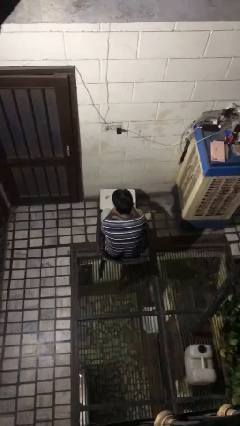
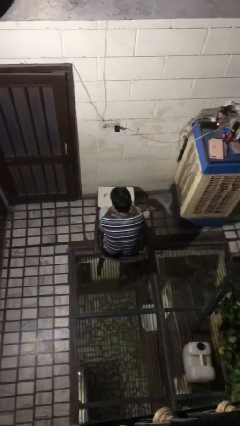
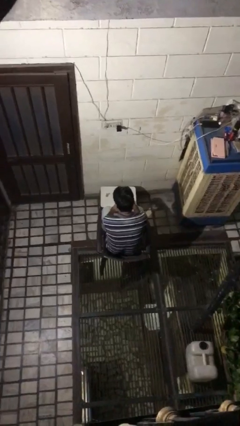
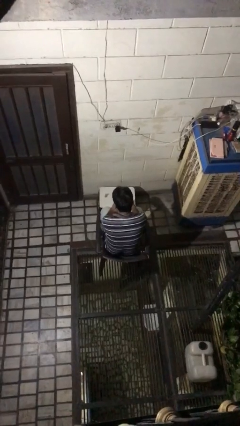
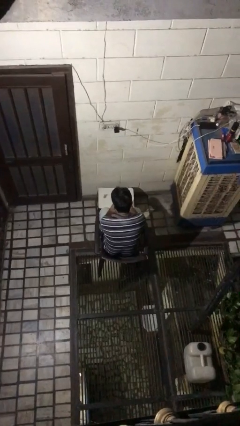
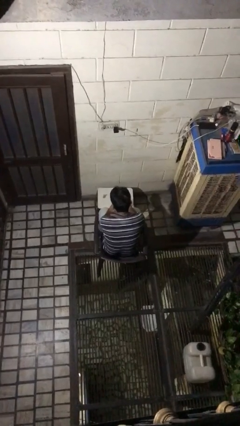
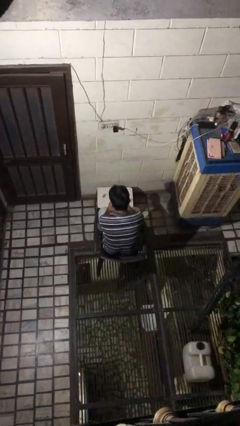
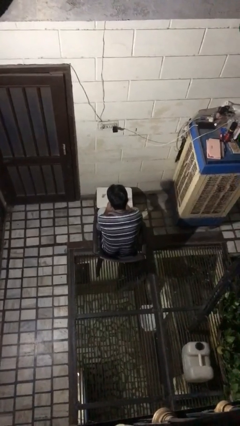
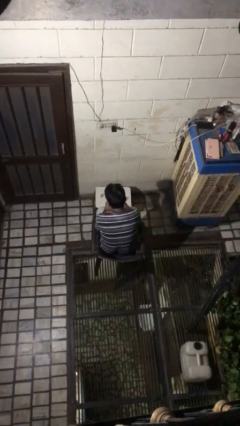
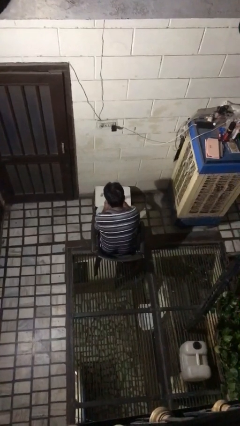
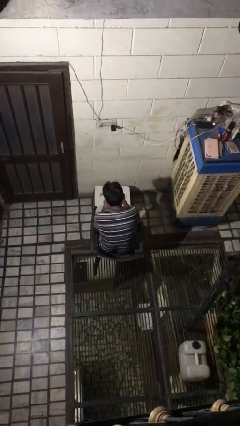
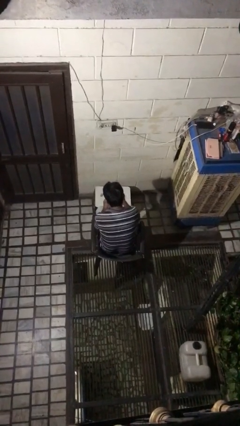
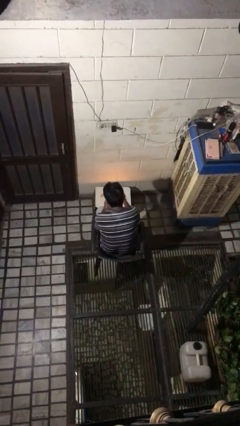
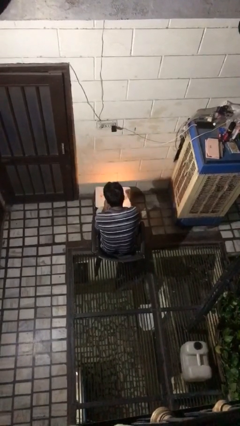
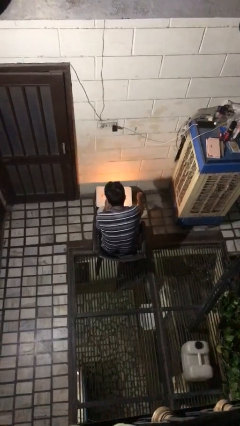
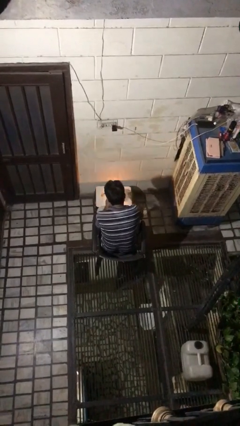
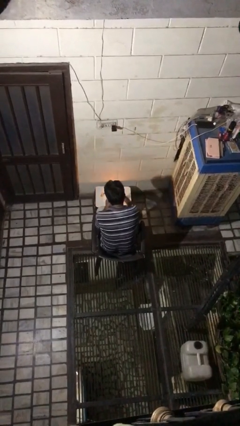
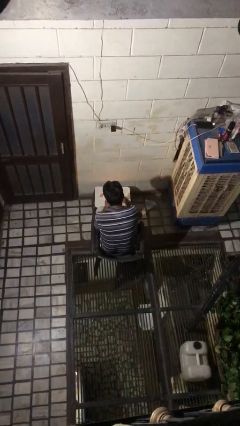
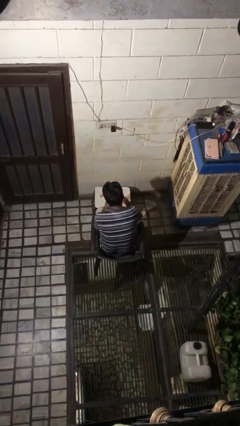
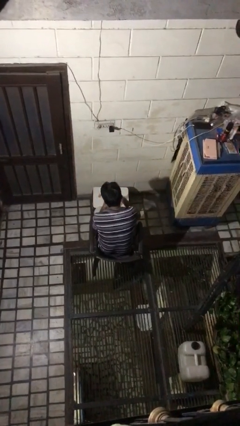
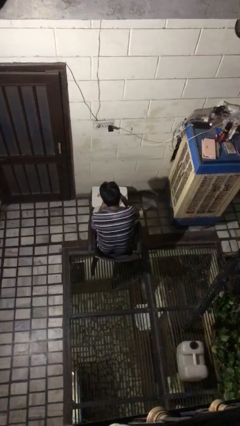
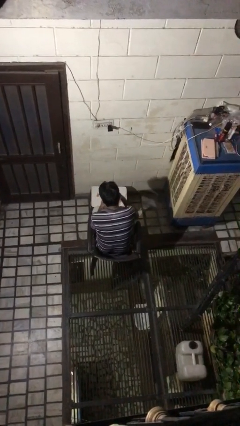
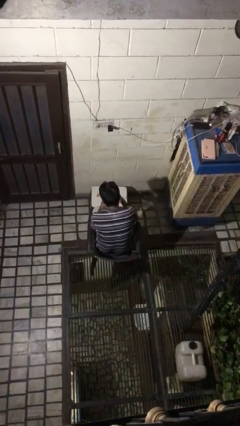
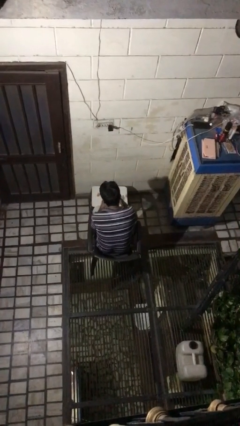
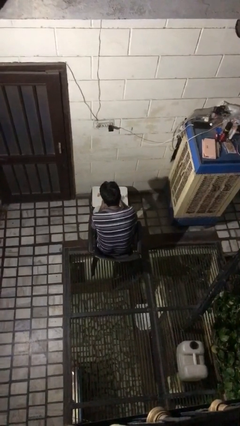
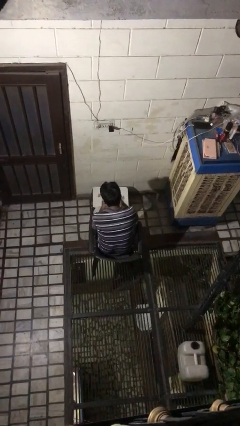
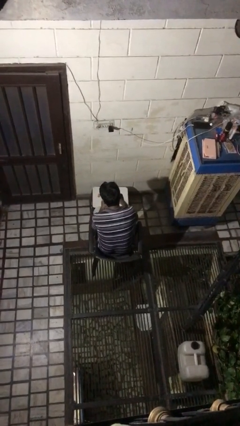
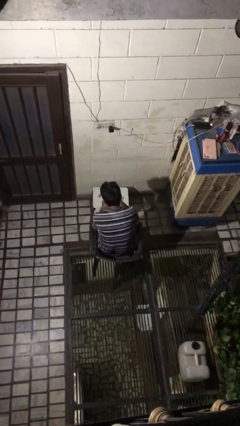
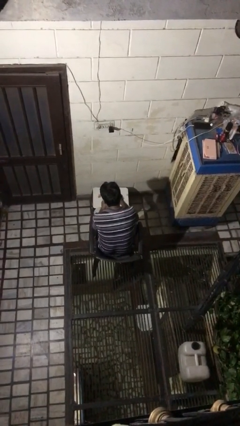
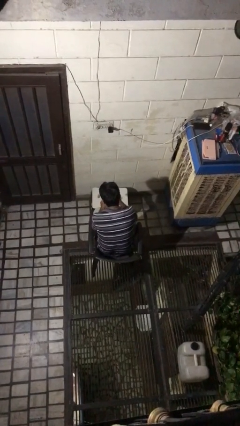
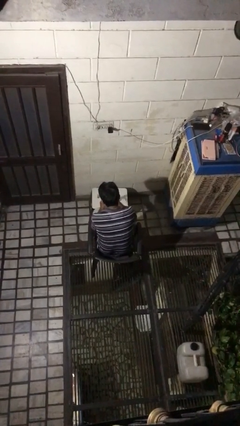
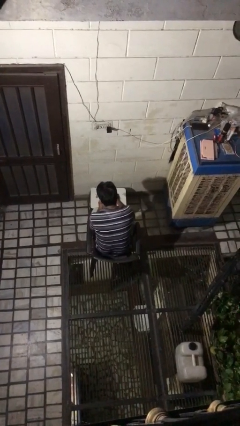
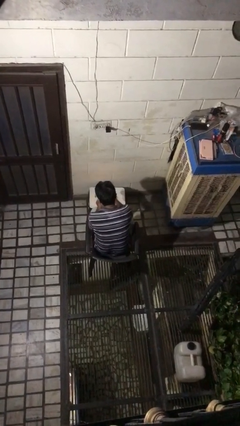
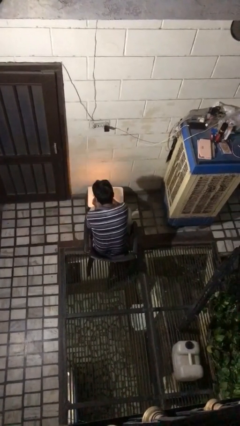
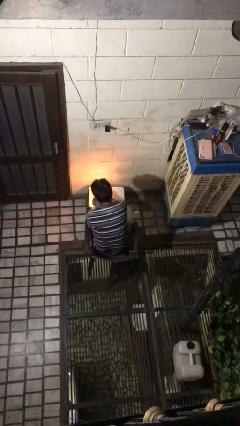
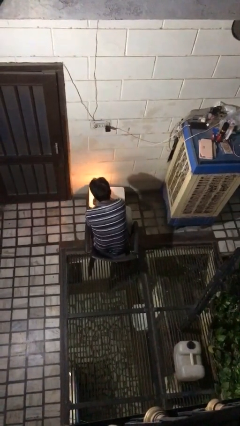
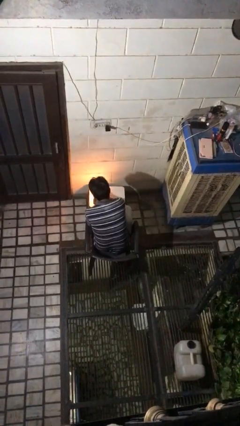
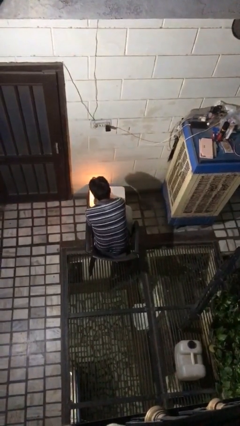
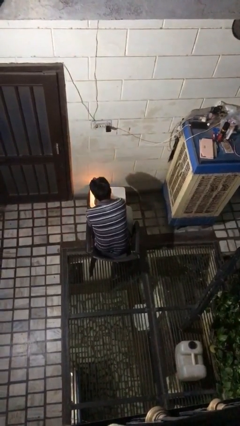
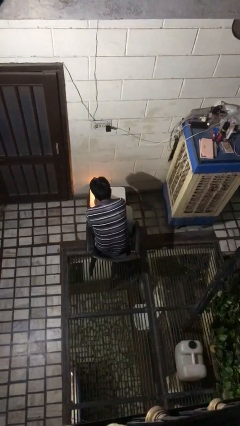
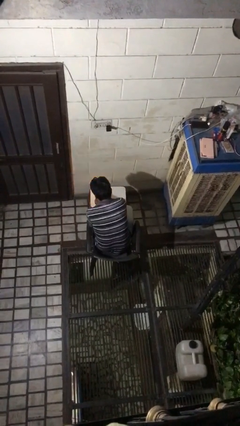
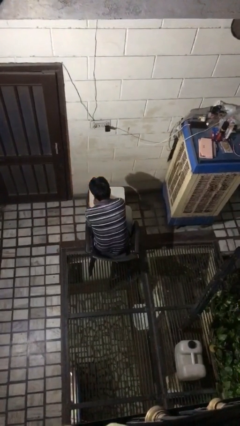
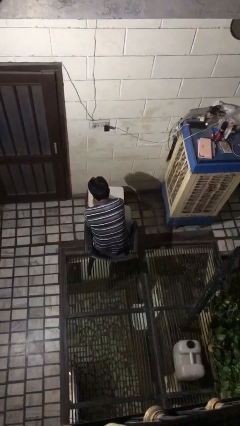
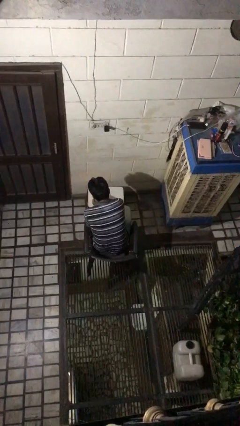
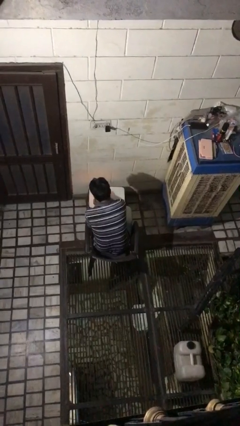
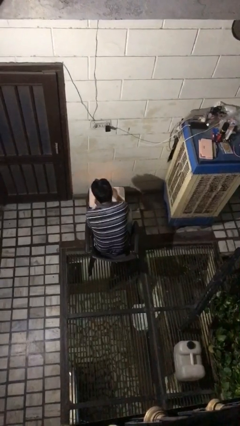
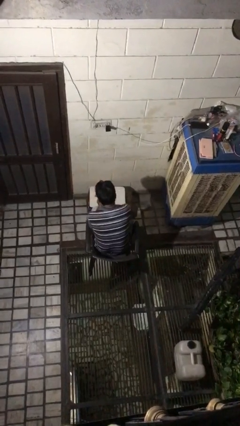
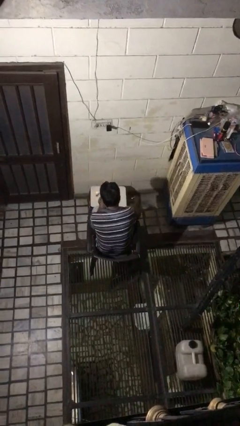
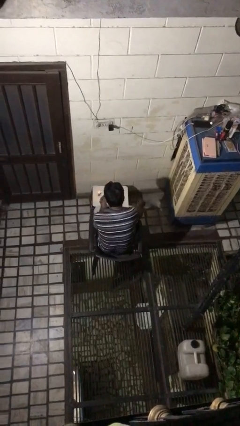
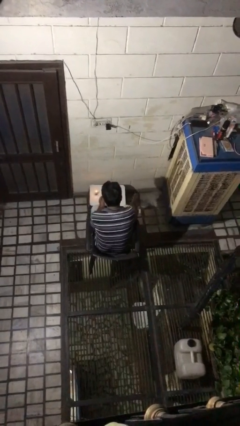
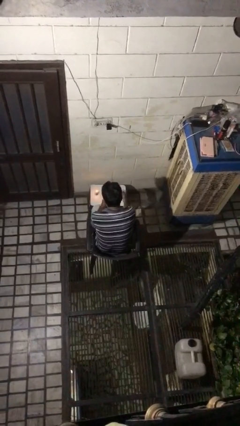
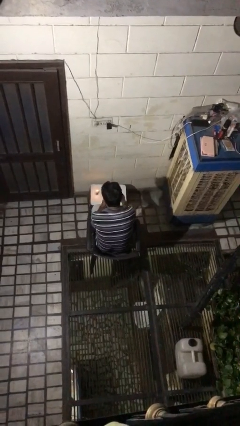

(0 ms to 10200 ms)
person lights candle

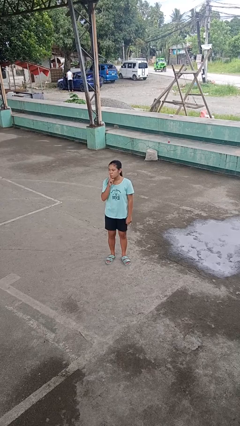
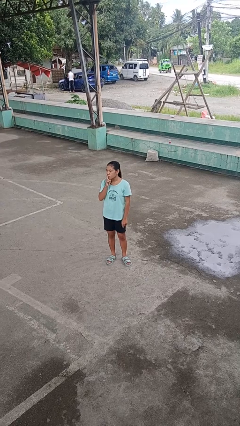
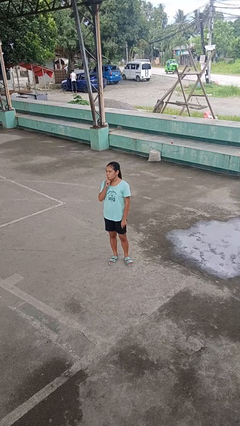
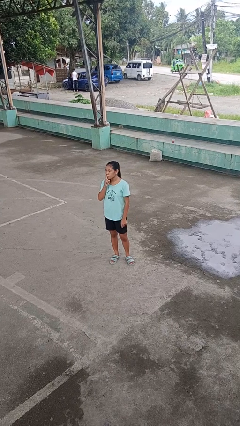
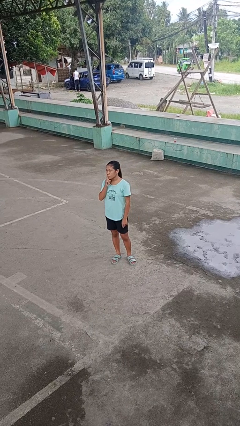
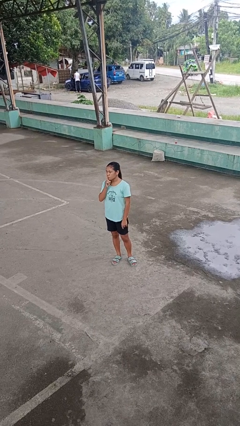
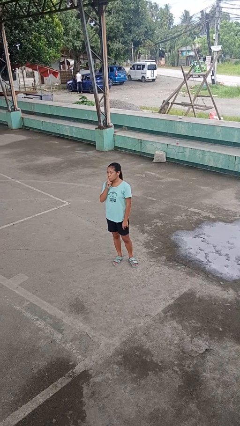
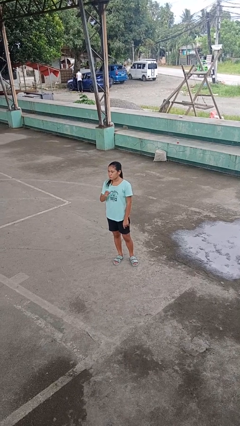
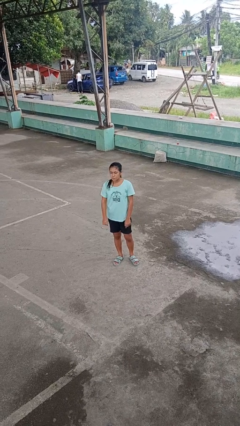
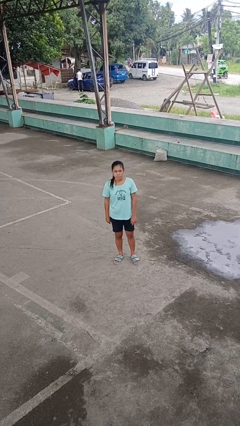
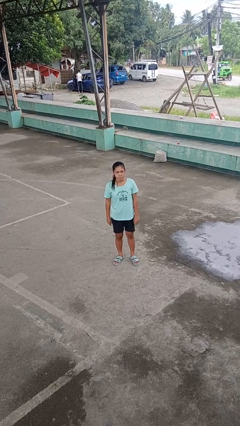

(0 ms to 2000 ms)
person gestures be quiet

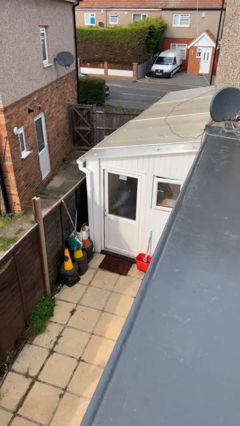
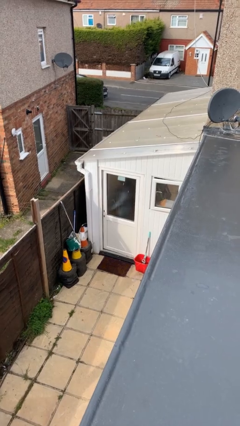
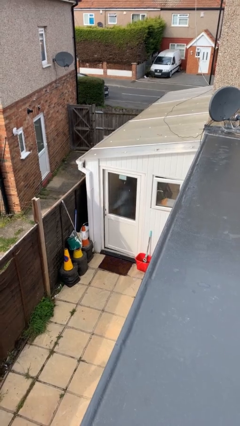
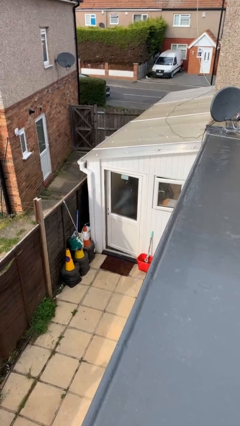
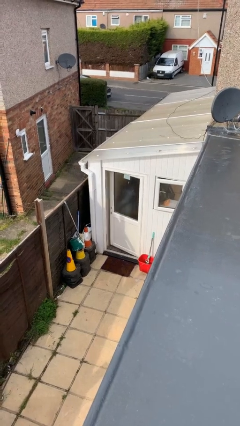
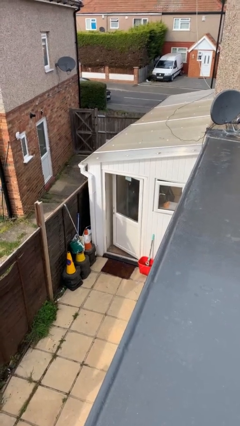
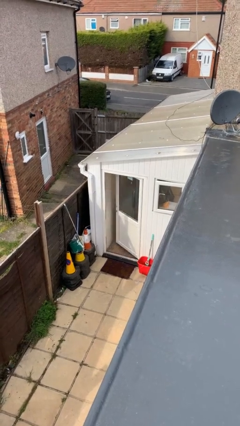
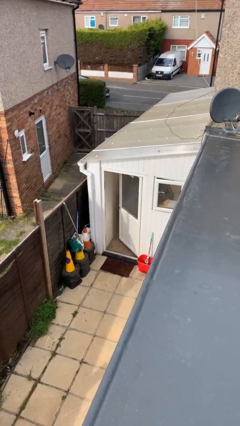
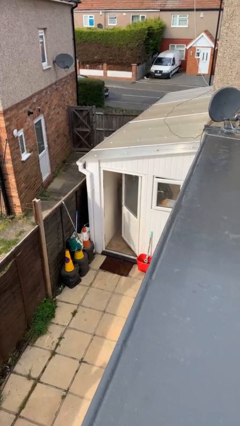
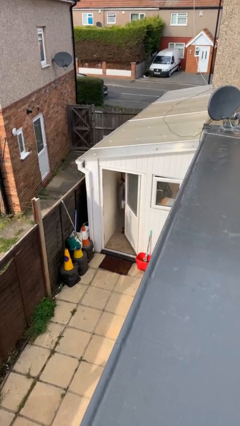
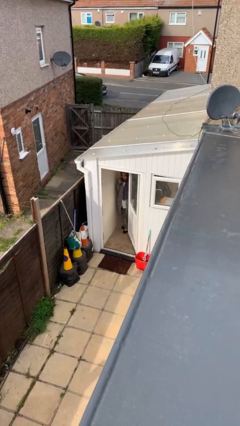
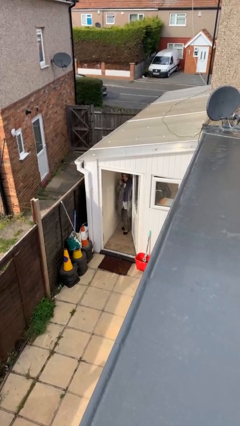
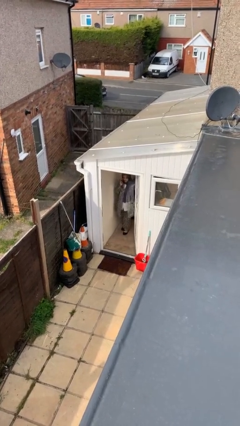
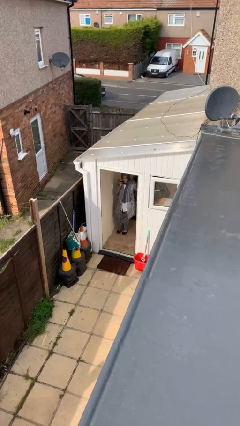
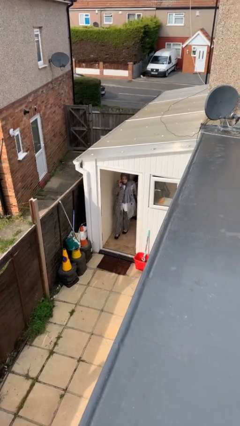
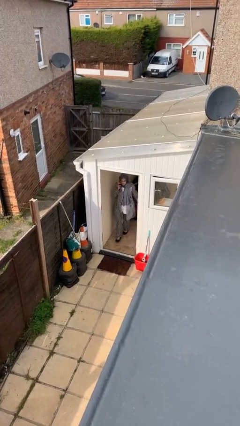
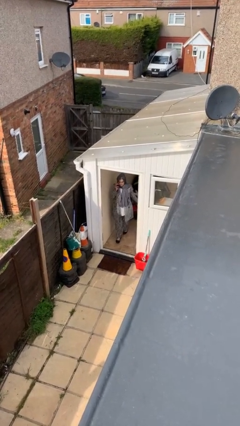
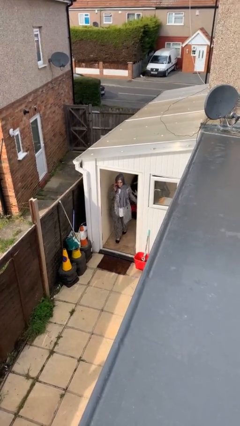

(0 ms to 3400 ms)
person opens facility door

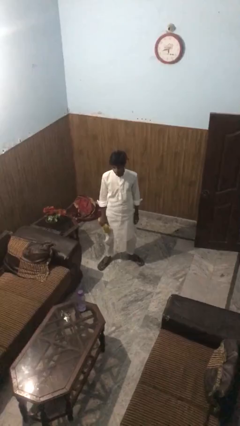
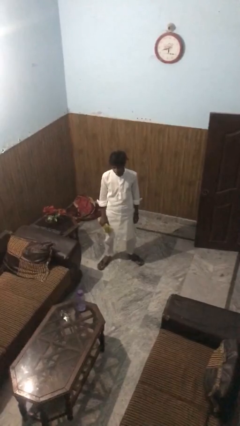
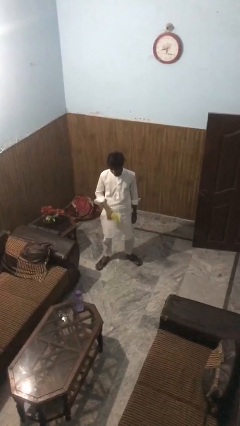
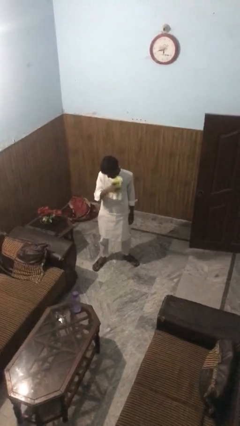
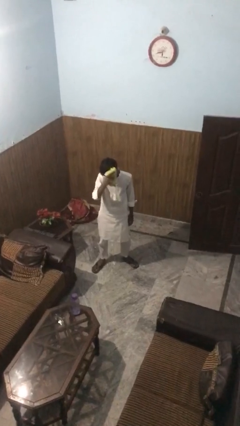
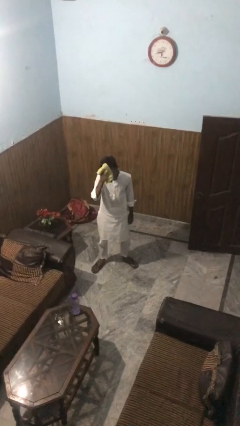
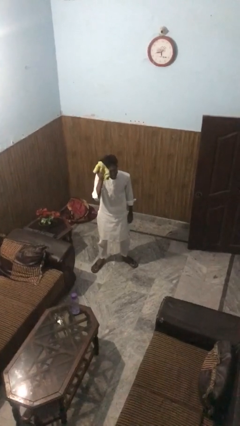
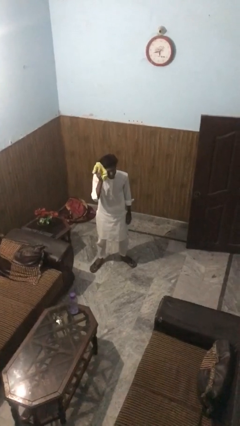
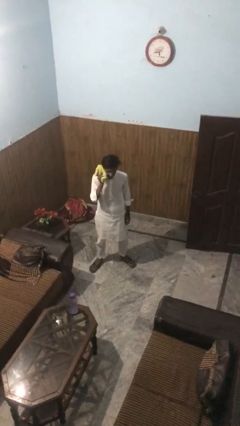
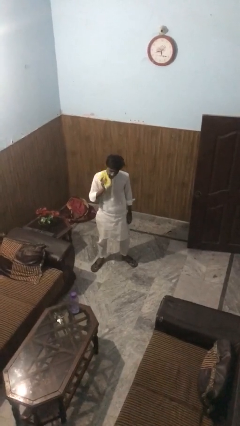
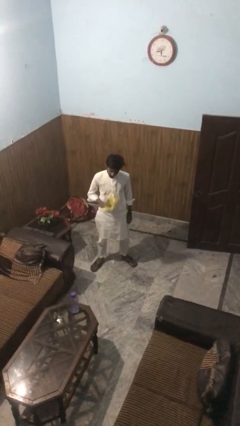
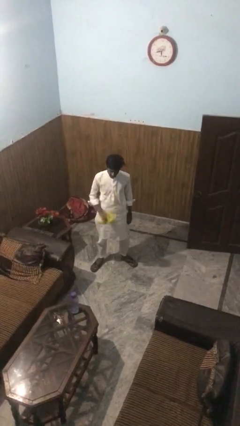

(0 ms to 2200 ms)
person wipes mouth with napkin
